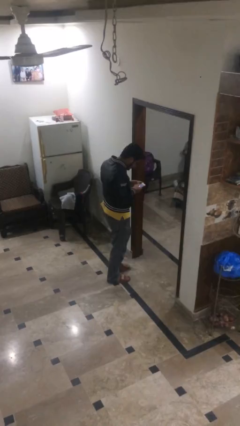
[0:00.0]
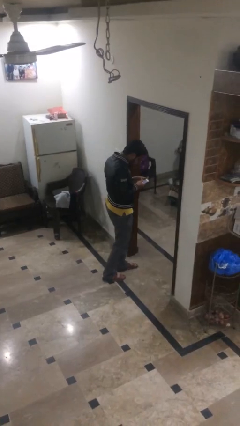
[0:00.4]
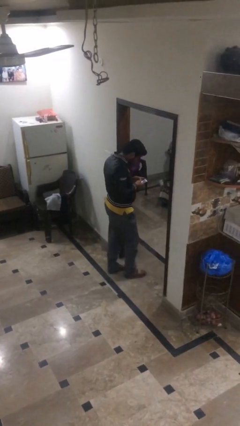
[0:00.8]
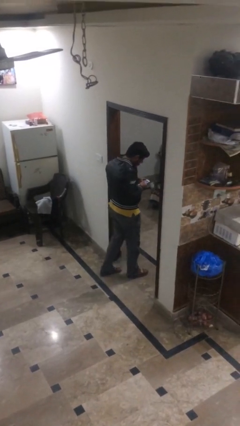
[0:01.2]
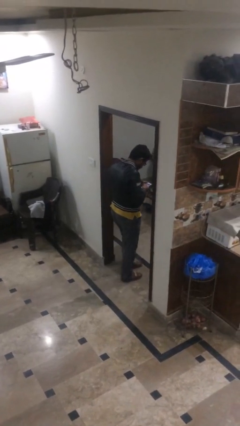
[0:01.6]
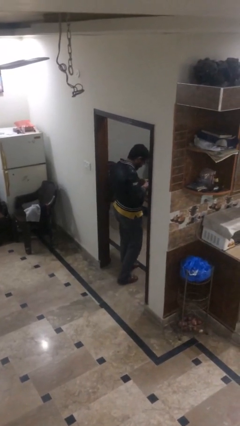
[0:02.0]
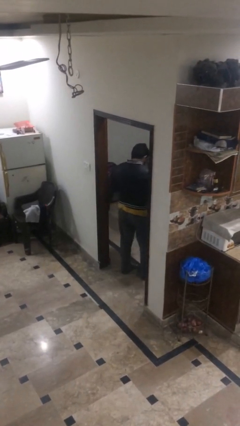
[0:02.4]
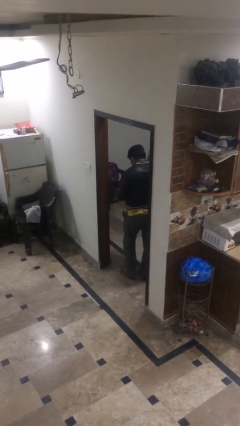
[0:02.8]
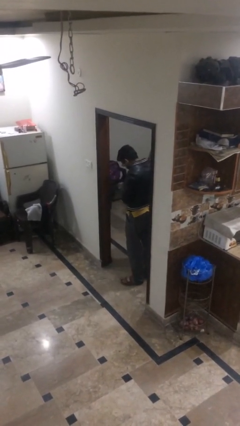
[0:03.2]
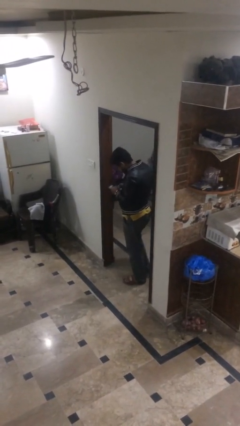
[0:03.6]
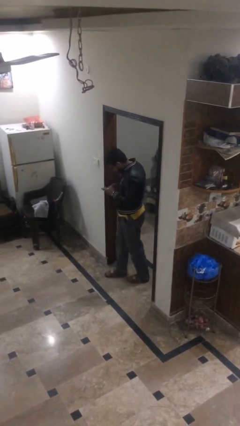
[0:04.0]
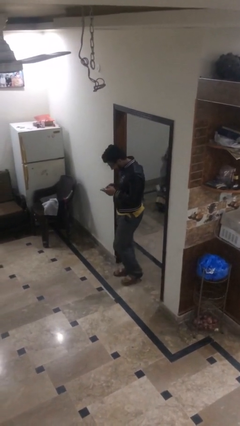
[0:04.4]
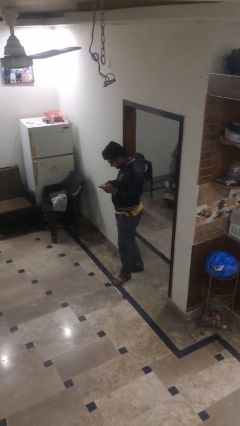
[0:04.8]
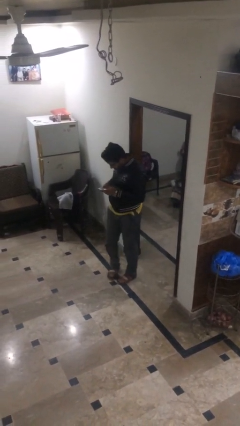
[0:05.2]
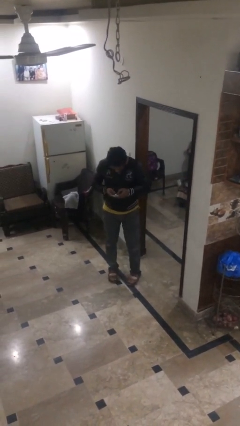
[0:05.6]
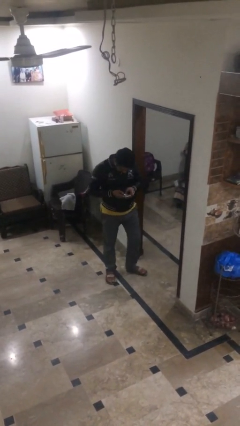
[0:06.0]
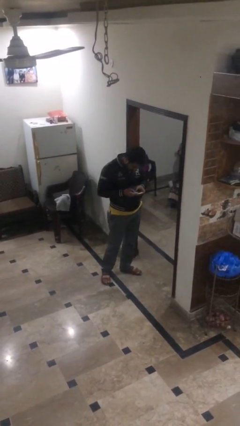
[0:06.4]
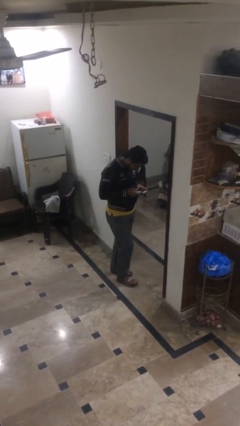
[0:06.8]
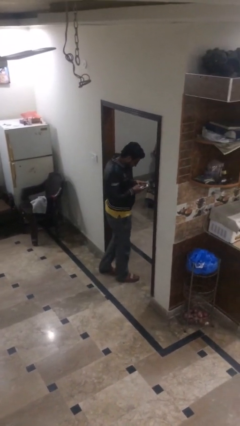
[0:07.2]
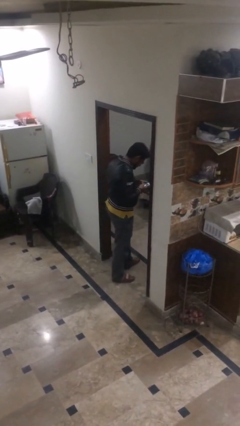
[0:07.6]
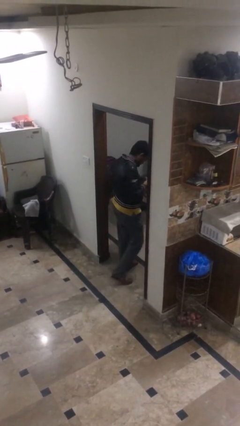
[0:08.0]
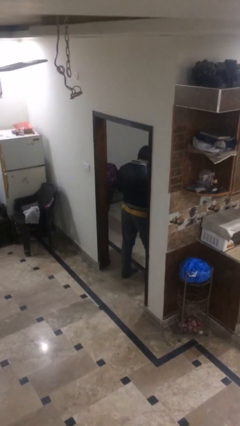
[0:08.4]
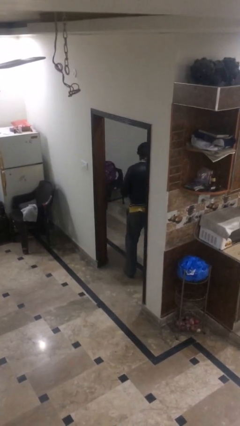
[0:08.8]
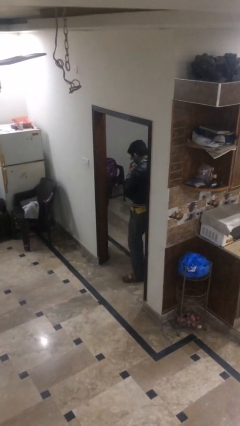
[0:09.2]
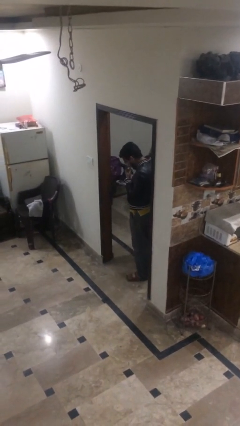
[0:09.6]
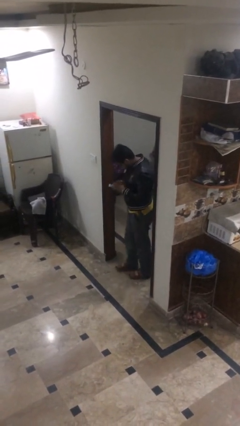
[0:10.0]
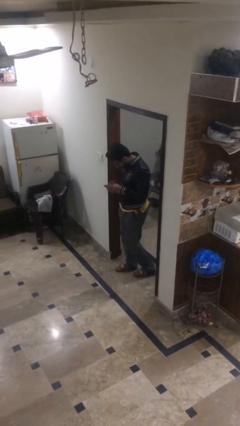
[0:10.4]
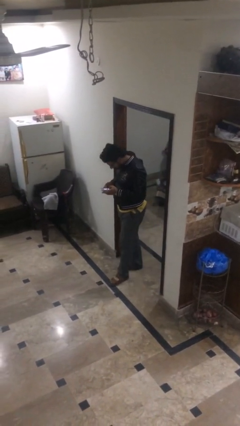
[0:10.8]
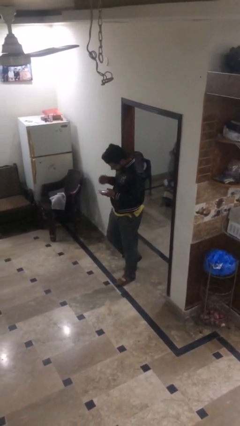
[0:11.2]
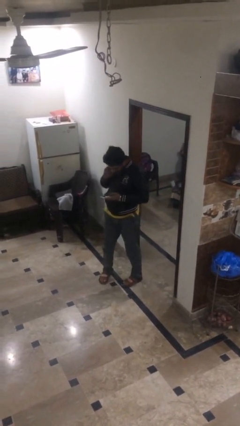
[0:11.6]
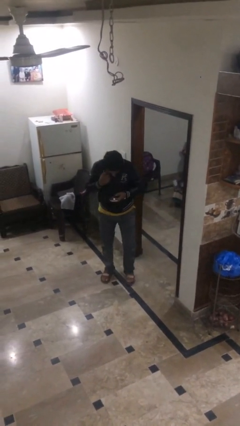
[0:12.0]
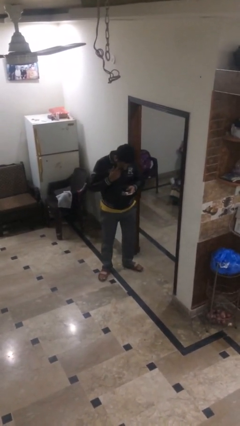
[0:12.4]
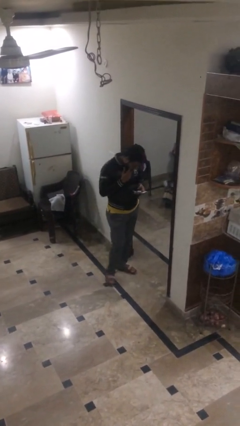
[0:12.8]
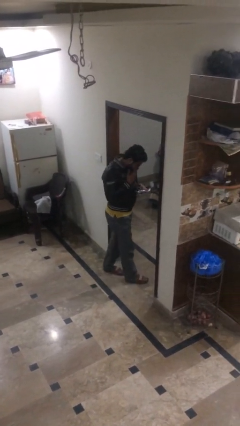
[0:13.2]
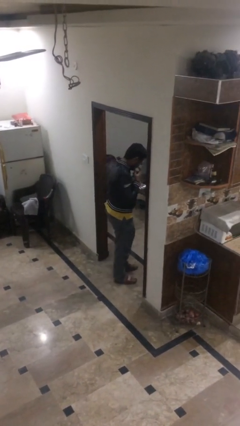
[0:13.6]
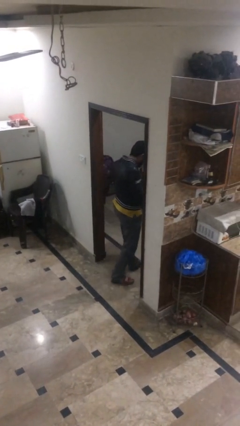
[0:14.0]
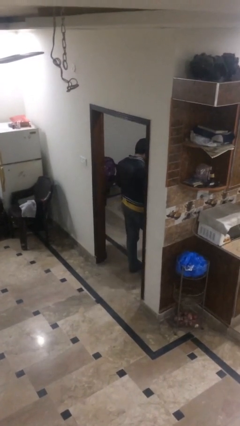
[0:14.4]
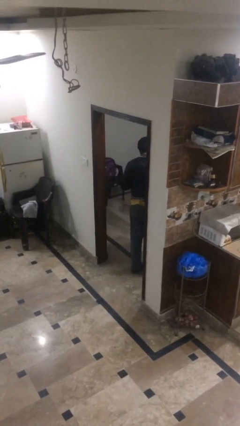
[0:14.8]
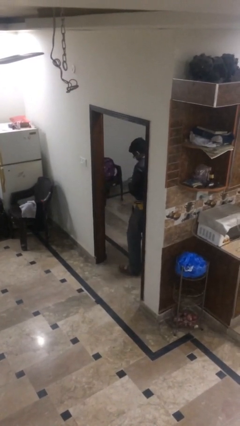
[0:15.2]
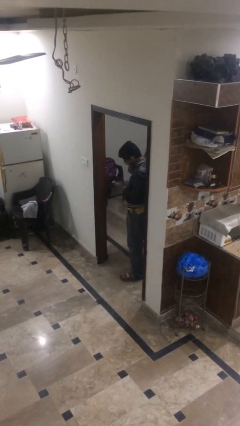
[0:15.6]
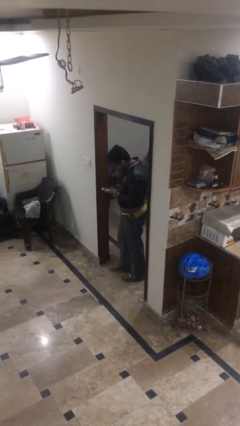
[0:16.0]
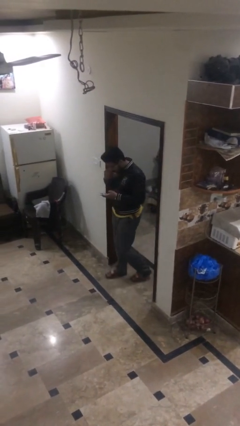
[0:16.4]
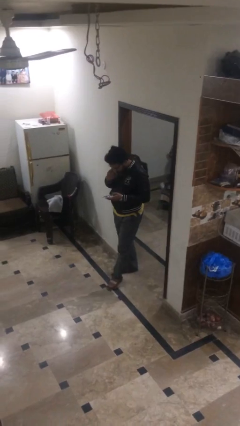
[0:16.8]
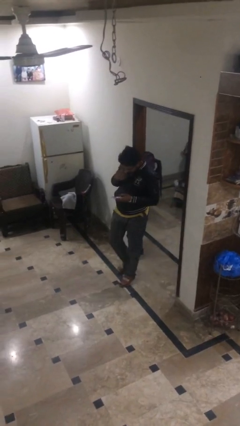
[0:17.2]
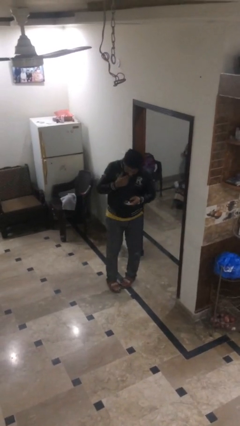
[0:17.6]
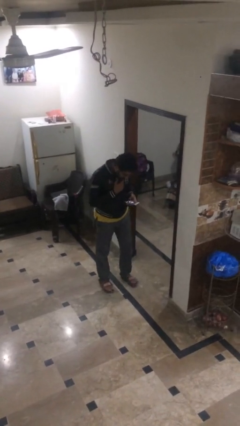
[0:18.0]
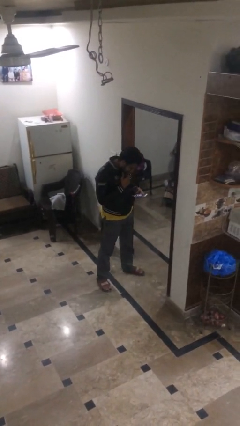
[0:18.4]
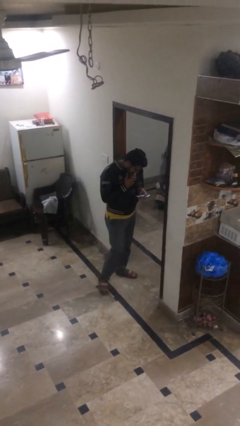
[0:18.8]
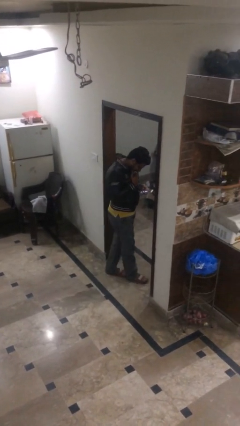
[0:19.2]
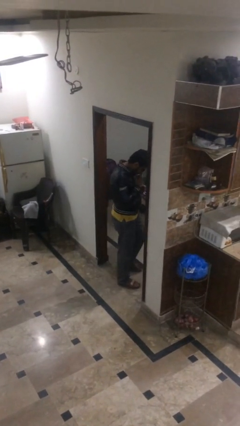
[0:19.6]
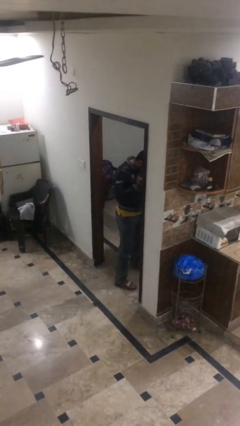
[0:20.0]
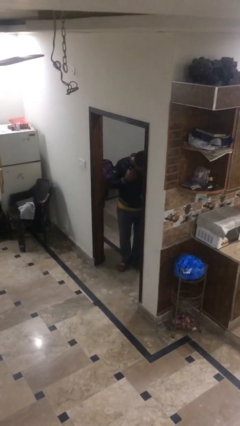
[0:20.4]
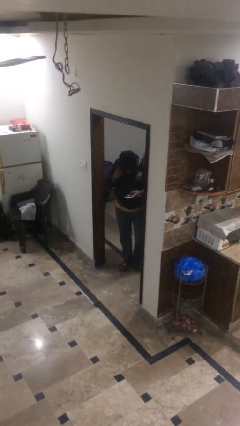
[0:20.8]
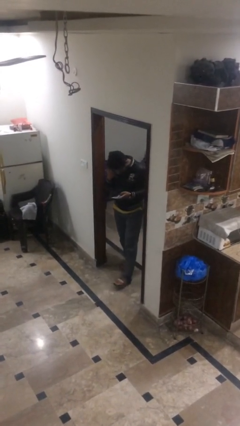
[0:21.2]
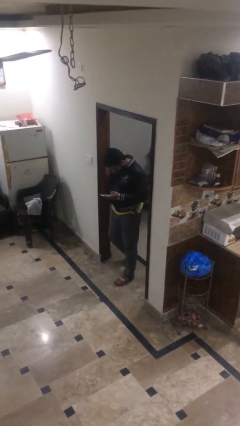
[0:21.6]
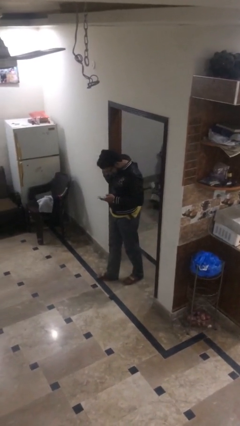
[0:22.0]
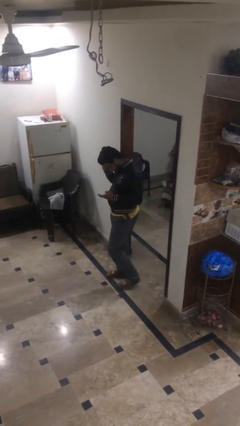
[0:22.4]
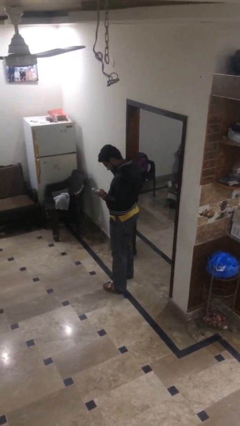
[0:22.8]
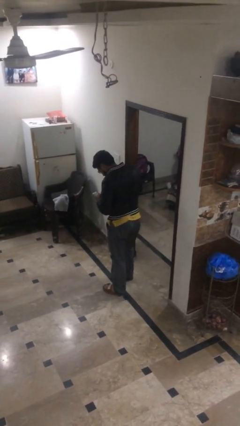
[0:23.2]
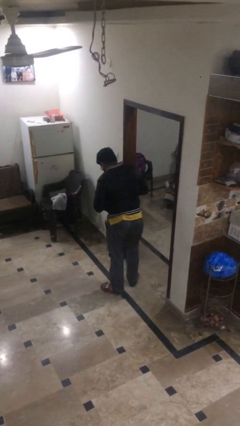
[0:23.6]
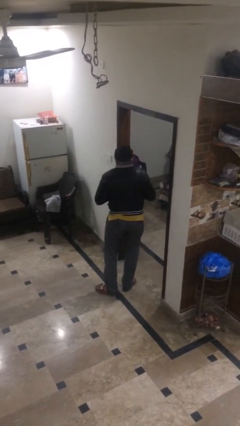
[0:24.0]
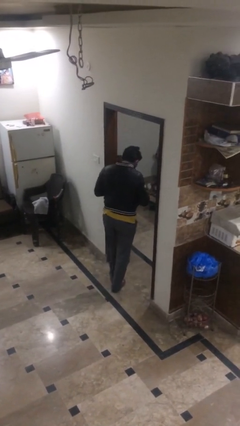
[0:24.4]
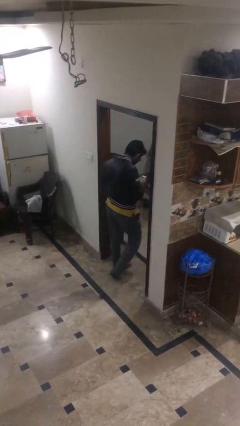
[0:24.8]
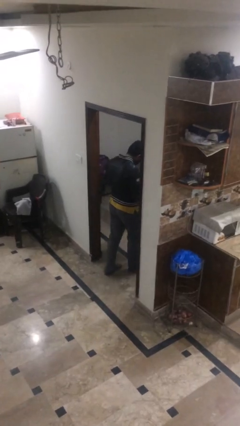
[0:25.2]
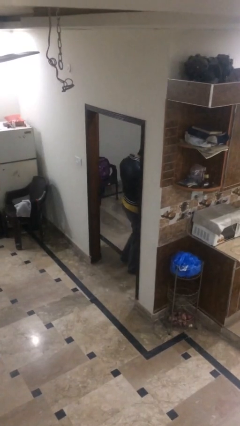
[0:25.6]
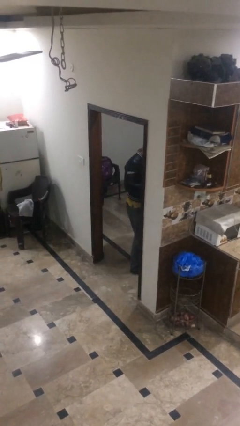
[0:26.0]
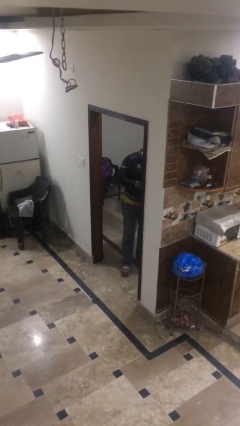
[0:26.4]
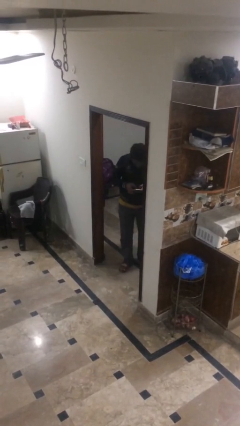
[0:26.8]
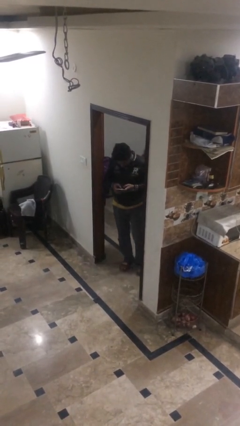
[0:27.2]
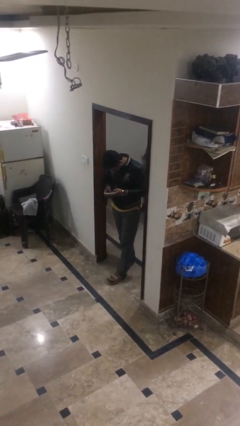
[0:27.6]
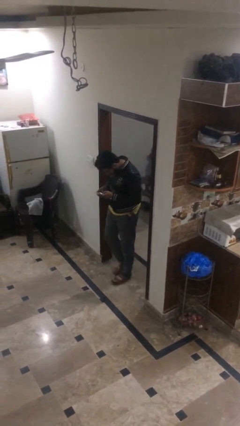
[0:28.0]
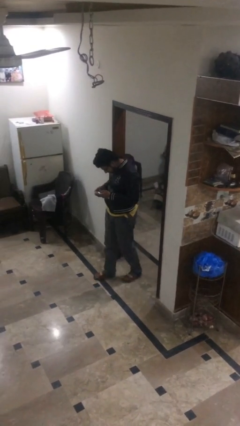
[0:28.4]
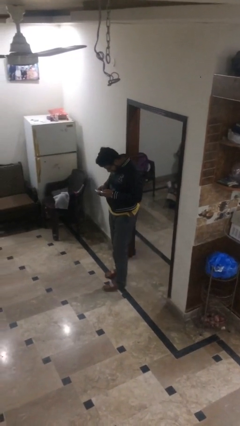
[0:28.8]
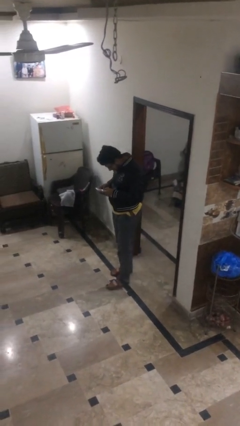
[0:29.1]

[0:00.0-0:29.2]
person texts on phone

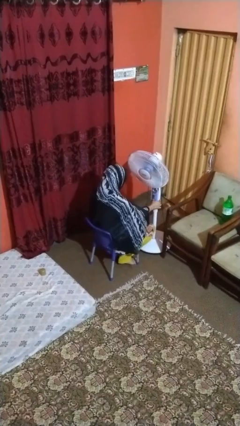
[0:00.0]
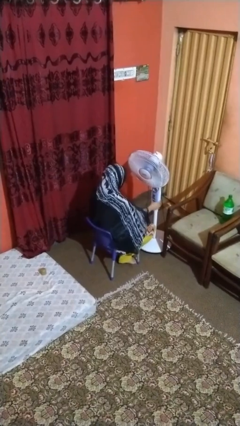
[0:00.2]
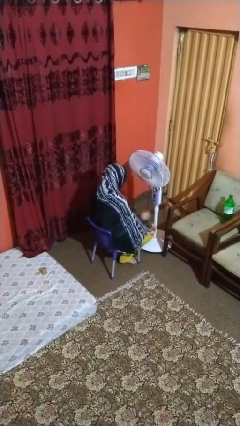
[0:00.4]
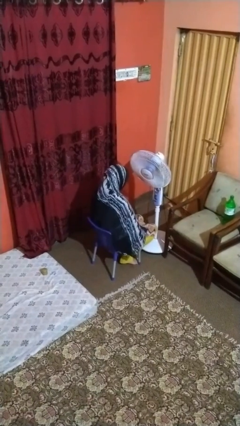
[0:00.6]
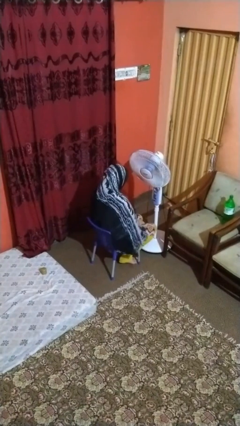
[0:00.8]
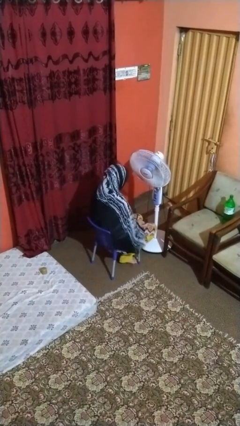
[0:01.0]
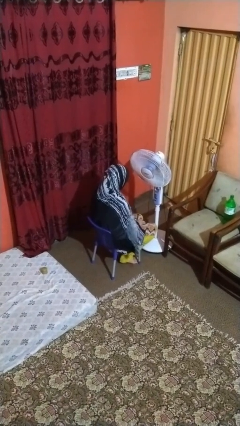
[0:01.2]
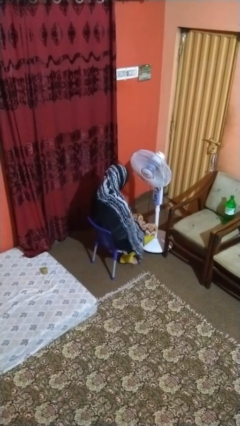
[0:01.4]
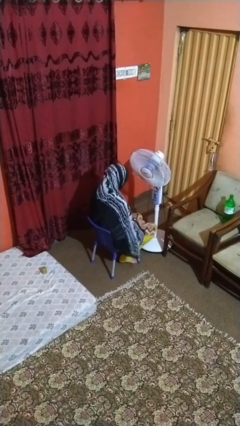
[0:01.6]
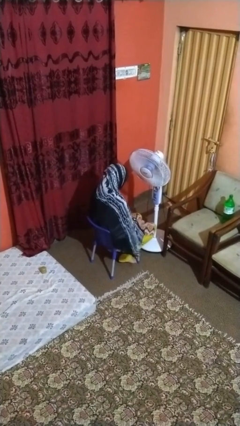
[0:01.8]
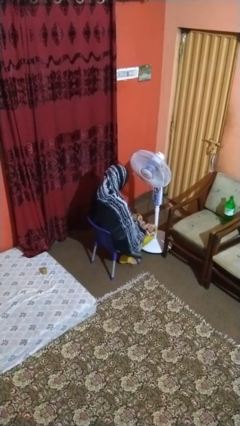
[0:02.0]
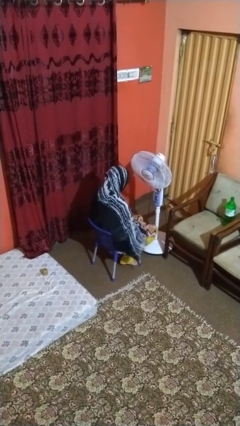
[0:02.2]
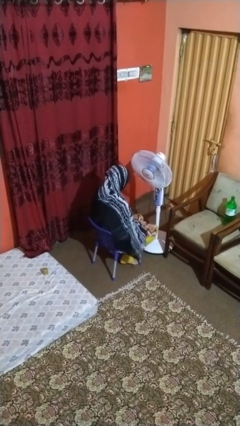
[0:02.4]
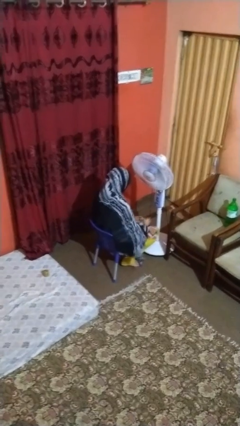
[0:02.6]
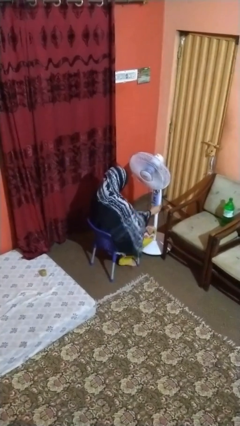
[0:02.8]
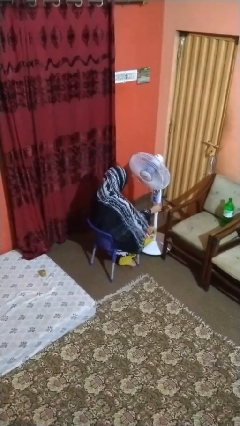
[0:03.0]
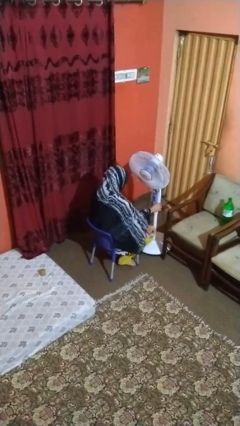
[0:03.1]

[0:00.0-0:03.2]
person turns on fan

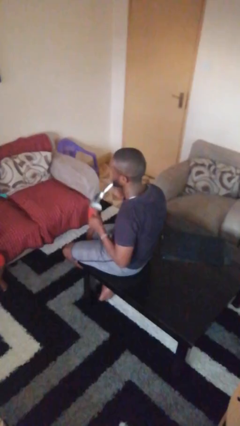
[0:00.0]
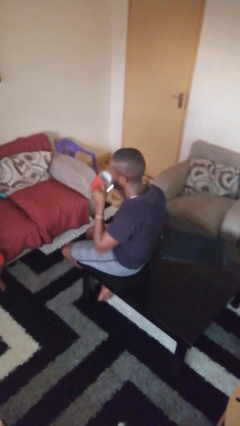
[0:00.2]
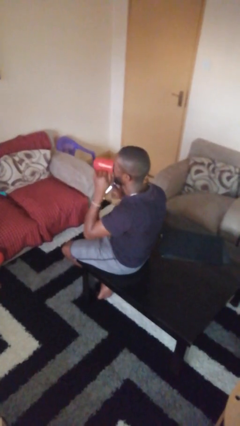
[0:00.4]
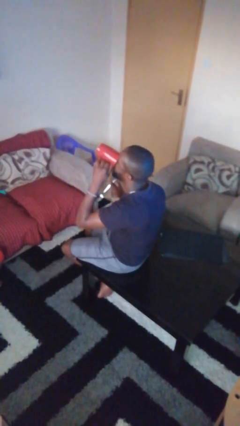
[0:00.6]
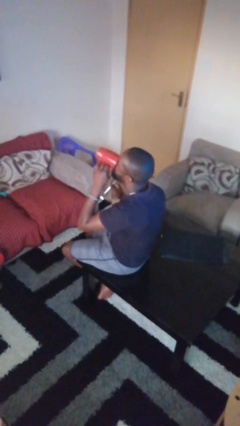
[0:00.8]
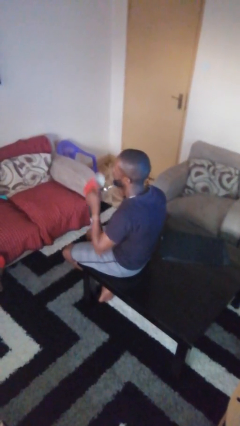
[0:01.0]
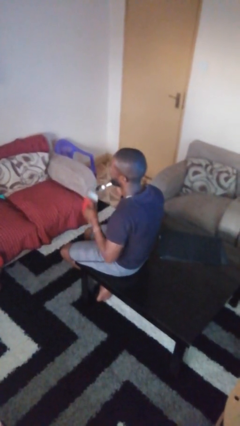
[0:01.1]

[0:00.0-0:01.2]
person drinks from mug
